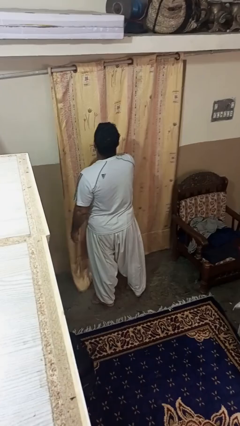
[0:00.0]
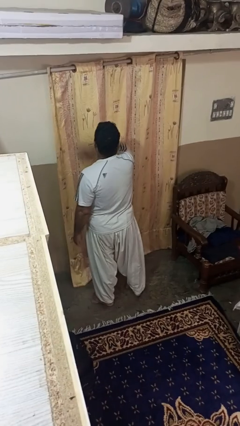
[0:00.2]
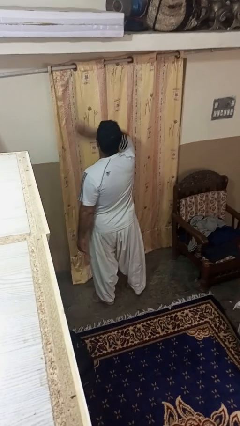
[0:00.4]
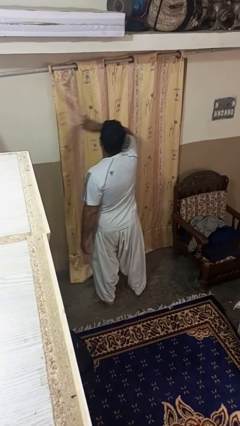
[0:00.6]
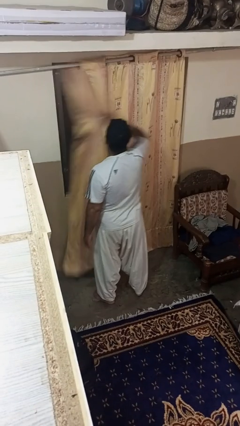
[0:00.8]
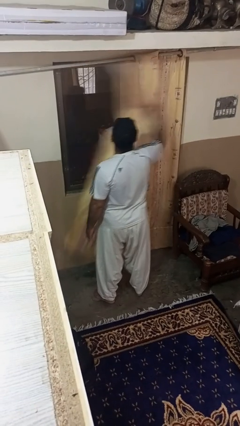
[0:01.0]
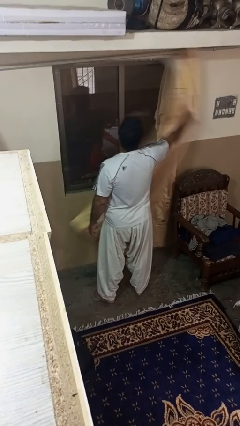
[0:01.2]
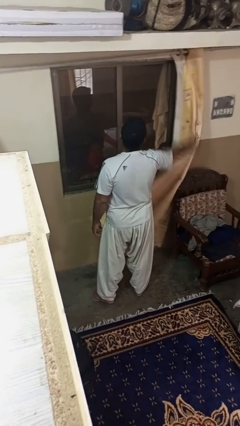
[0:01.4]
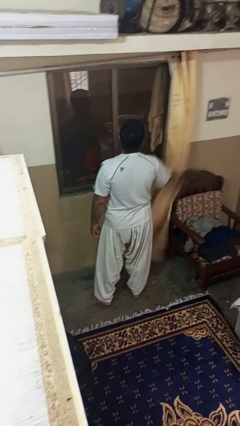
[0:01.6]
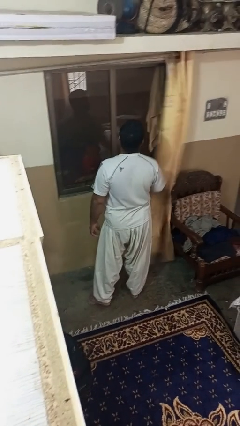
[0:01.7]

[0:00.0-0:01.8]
person opens curtains

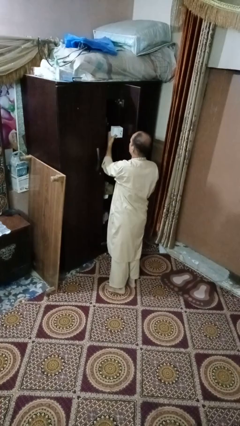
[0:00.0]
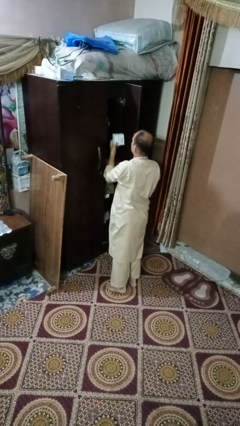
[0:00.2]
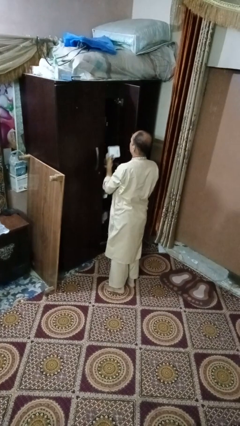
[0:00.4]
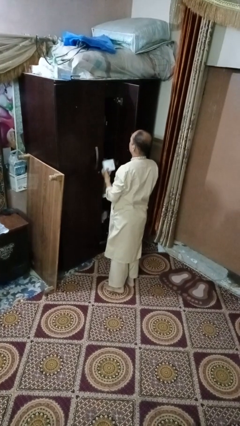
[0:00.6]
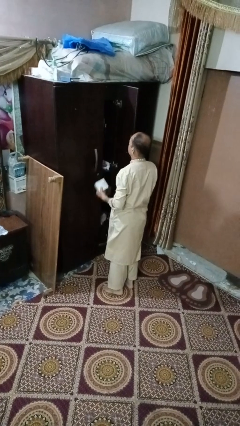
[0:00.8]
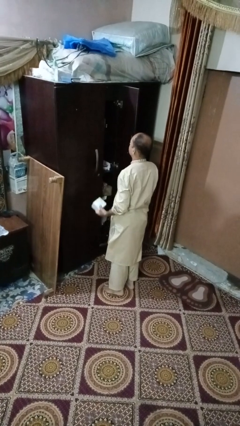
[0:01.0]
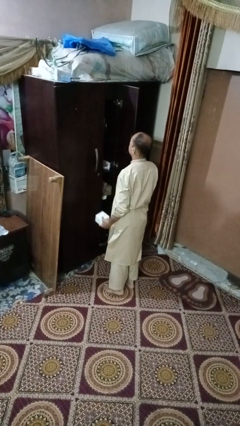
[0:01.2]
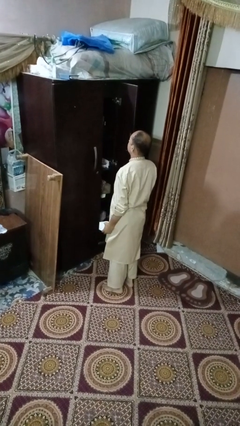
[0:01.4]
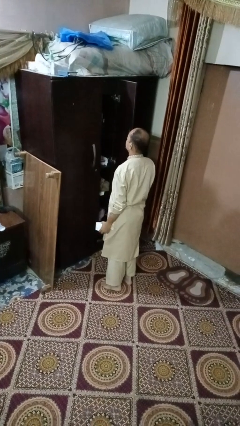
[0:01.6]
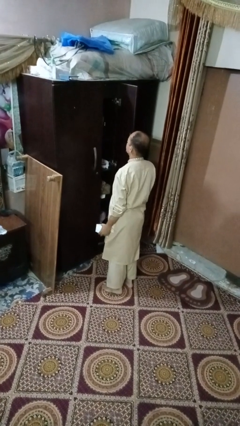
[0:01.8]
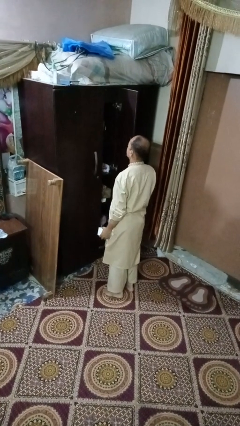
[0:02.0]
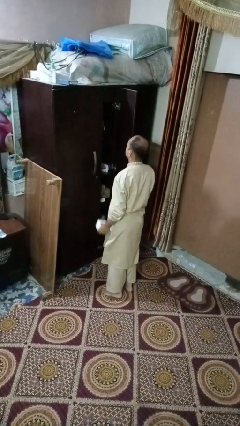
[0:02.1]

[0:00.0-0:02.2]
person puts down object into cabinet

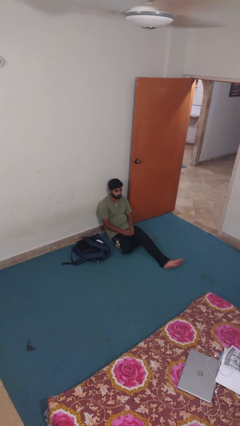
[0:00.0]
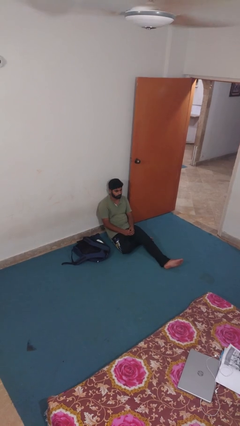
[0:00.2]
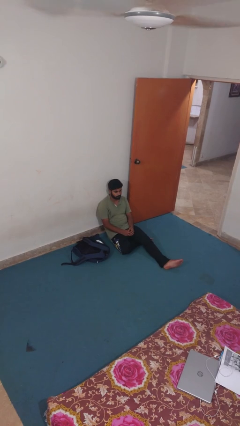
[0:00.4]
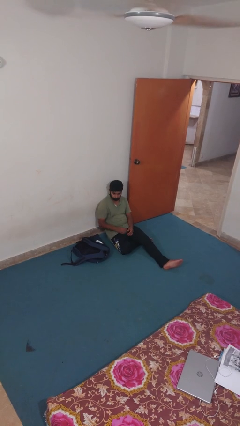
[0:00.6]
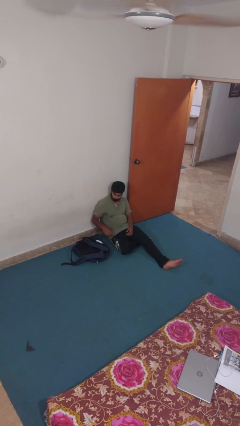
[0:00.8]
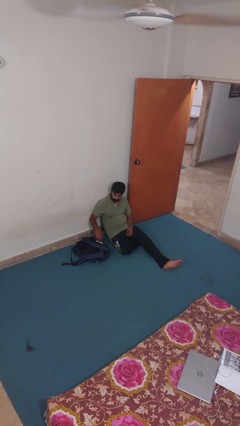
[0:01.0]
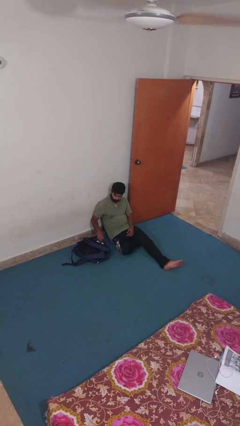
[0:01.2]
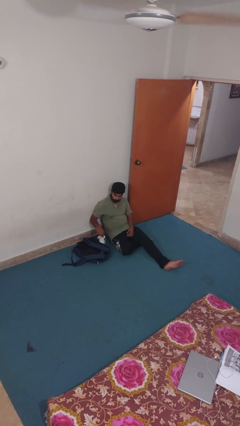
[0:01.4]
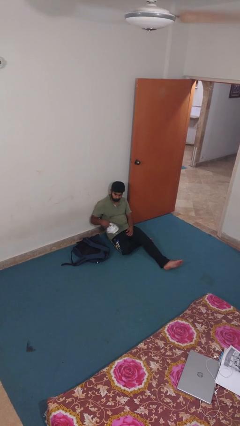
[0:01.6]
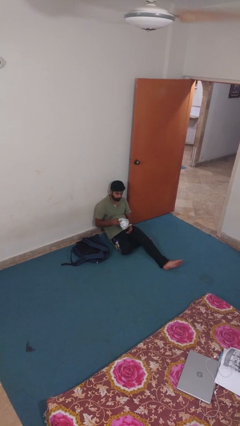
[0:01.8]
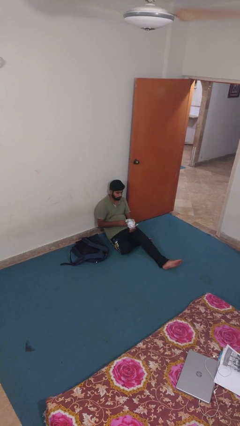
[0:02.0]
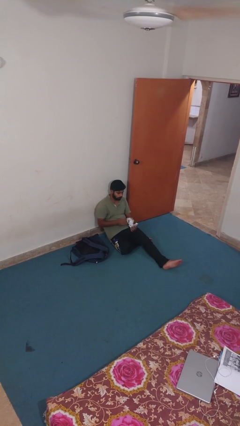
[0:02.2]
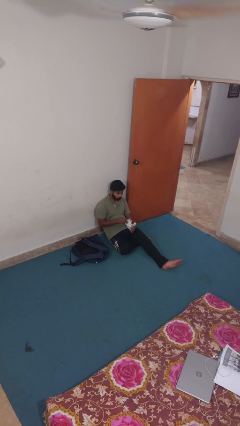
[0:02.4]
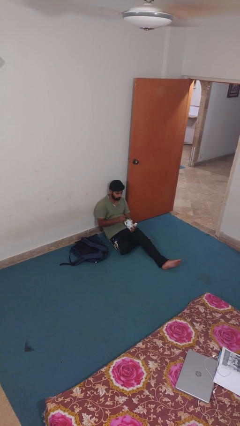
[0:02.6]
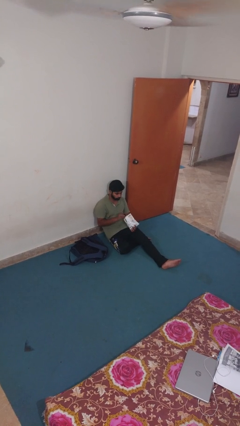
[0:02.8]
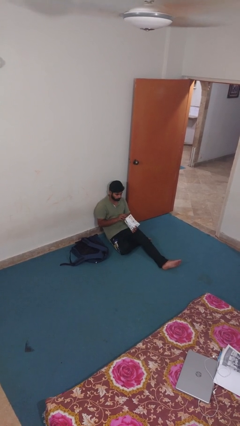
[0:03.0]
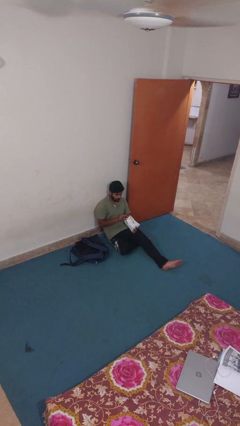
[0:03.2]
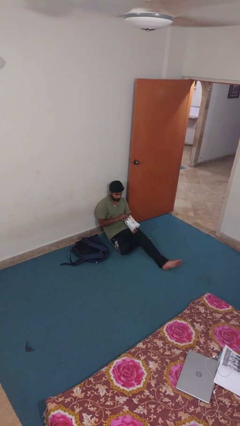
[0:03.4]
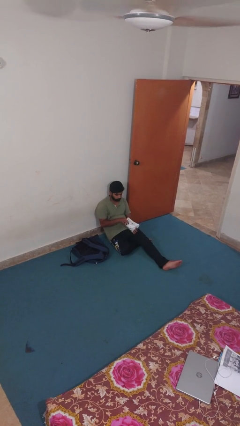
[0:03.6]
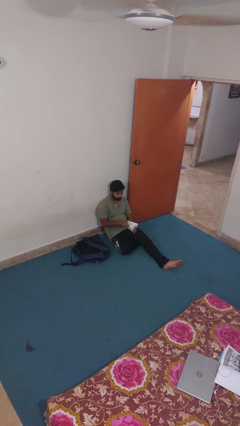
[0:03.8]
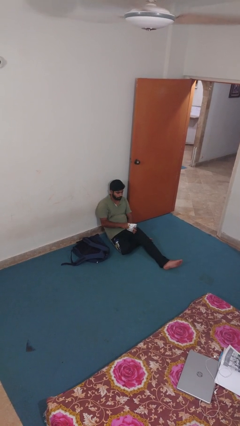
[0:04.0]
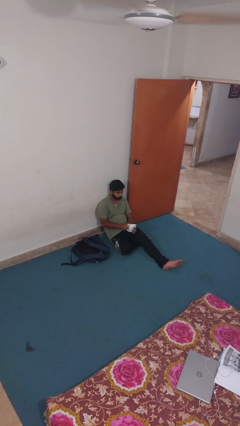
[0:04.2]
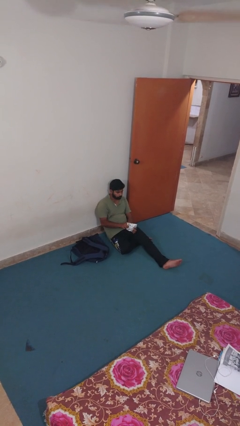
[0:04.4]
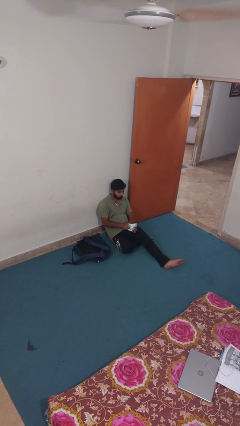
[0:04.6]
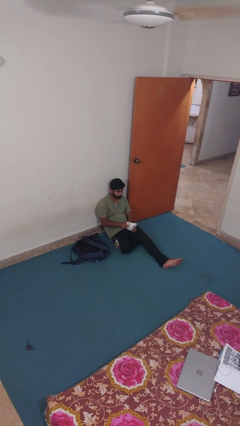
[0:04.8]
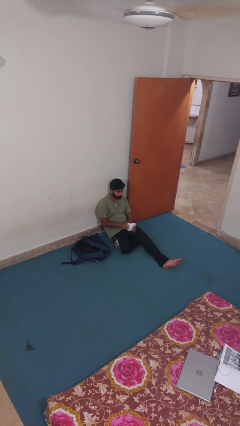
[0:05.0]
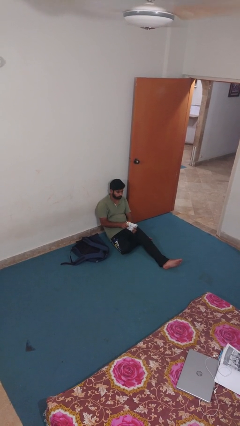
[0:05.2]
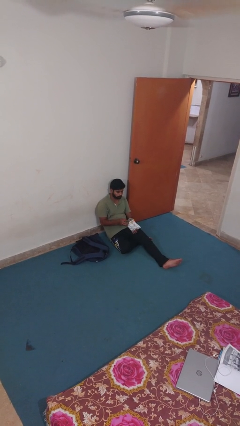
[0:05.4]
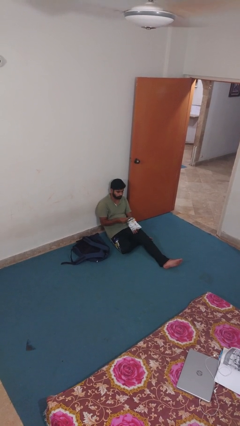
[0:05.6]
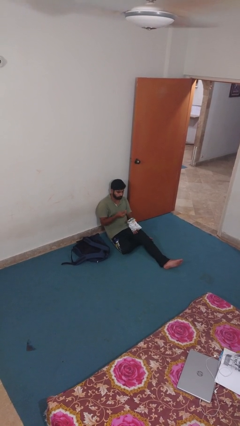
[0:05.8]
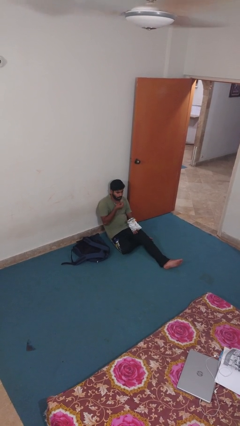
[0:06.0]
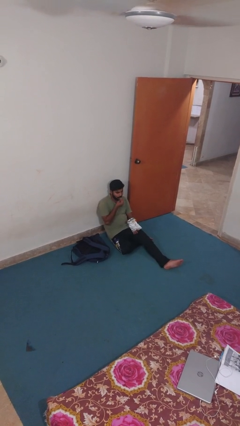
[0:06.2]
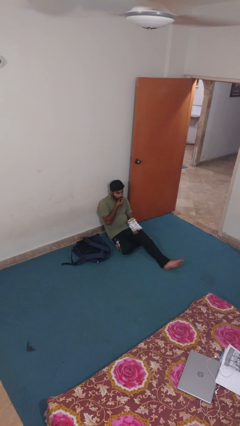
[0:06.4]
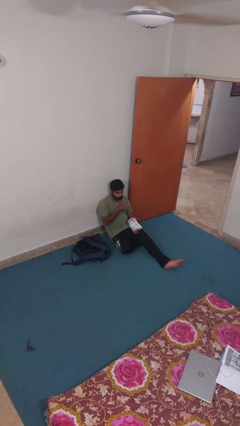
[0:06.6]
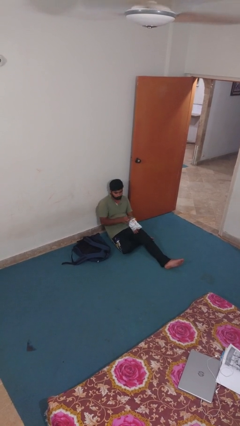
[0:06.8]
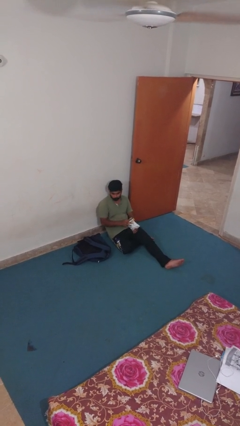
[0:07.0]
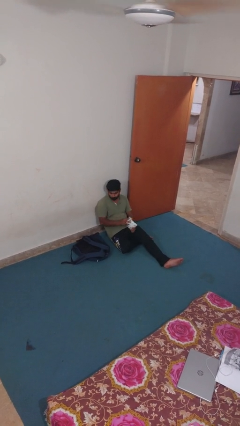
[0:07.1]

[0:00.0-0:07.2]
person eats snack from bag

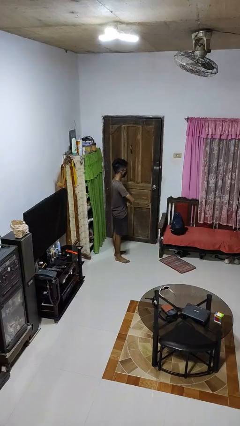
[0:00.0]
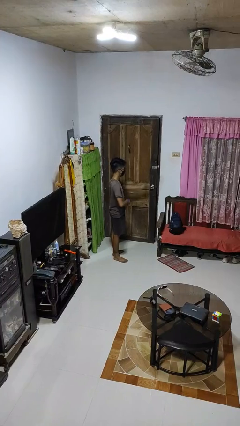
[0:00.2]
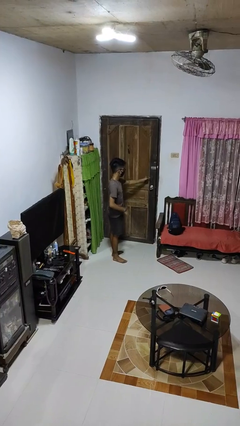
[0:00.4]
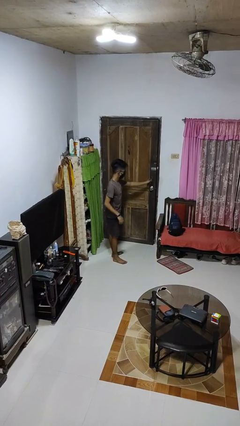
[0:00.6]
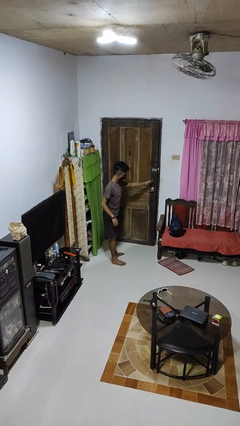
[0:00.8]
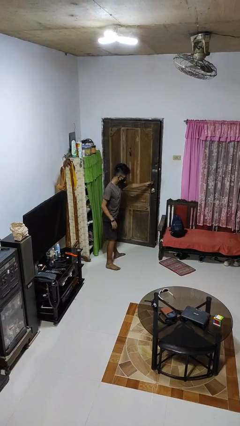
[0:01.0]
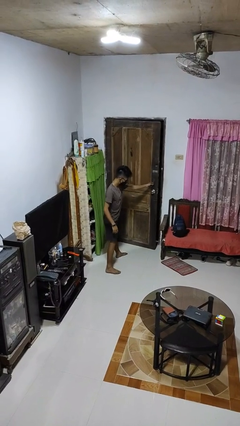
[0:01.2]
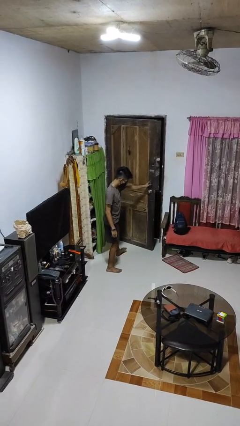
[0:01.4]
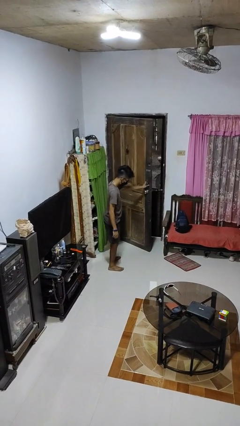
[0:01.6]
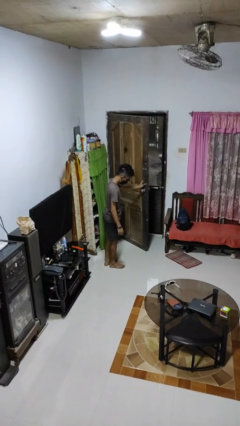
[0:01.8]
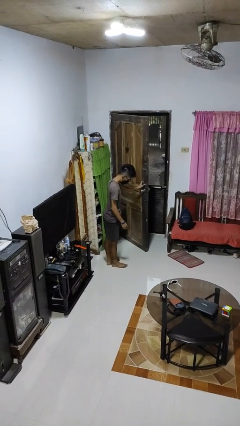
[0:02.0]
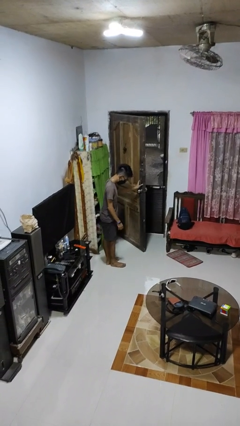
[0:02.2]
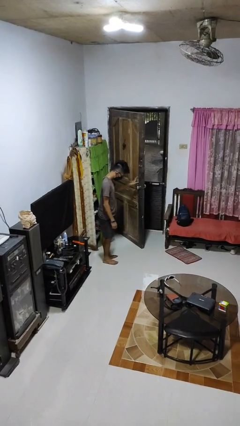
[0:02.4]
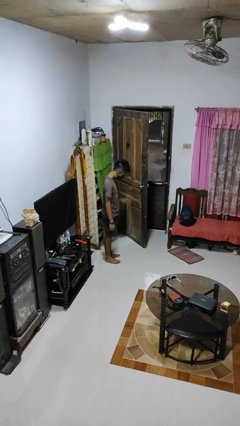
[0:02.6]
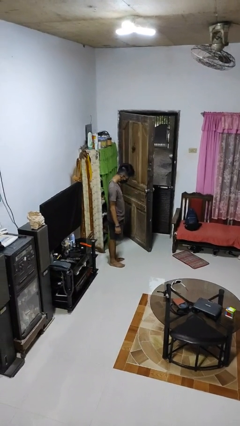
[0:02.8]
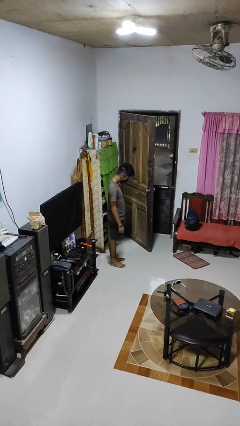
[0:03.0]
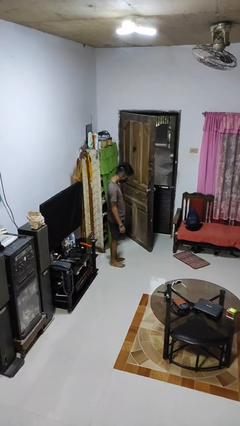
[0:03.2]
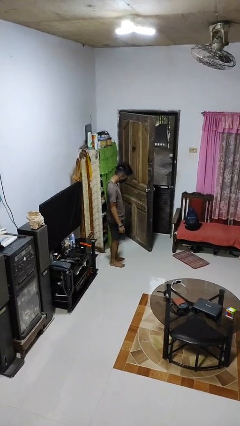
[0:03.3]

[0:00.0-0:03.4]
person opens facility door

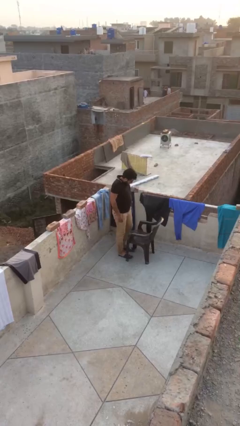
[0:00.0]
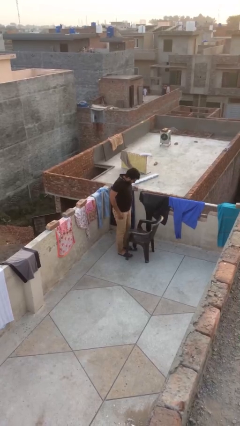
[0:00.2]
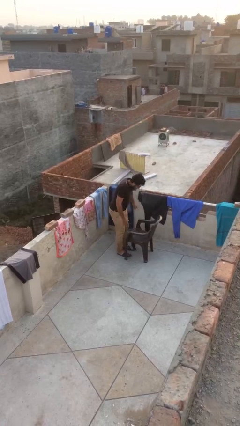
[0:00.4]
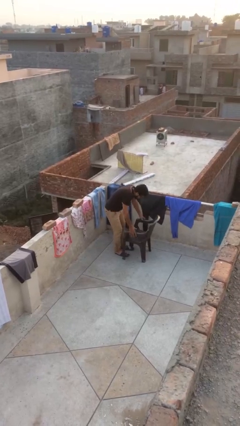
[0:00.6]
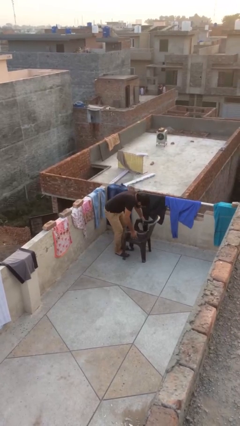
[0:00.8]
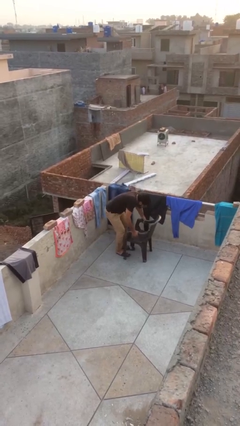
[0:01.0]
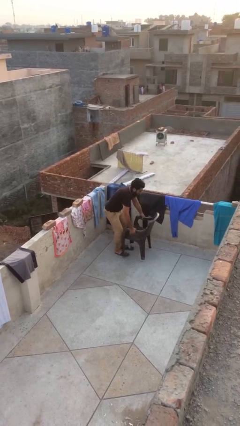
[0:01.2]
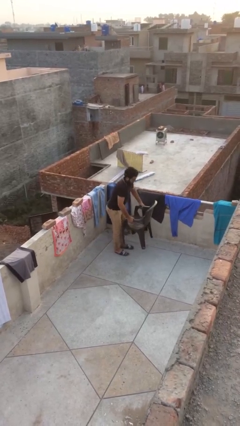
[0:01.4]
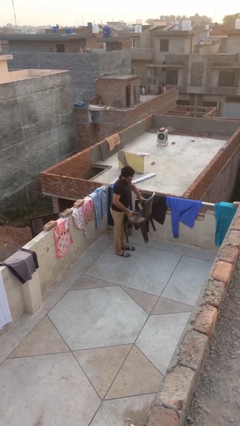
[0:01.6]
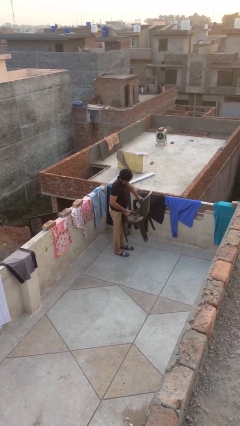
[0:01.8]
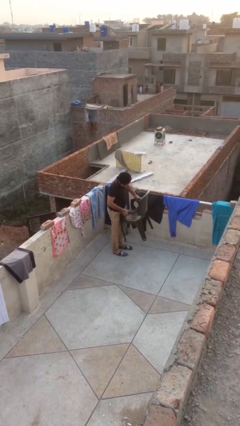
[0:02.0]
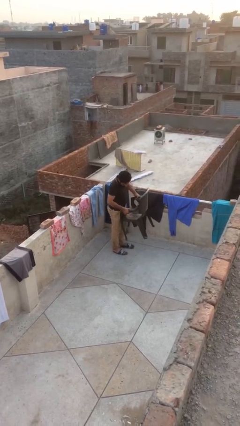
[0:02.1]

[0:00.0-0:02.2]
person picks up object from floor

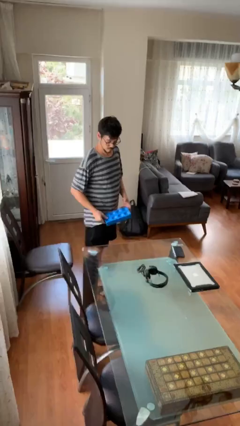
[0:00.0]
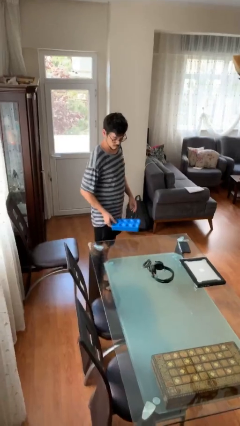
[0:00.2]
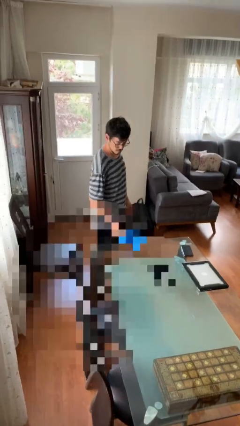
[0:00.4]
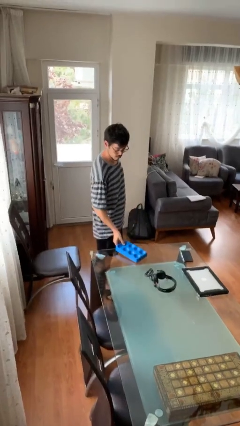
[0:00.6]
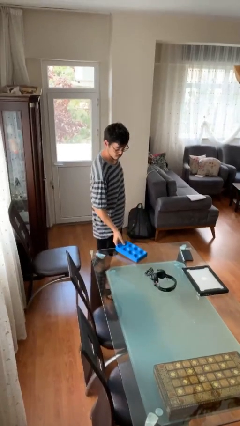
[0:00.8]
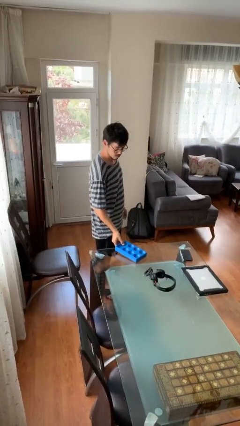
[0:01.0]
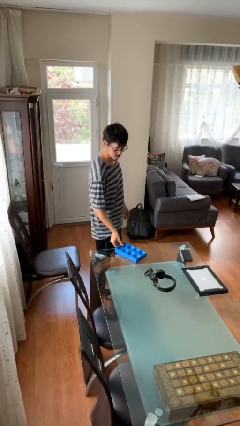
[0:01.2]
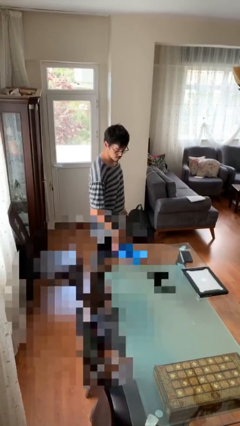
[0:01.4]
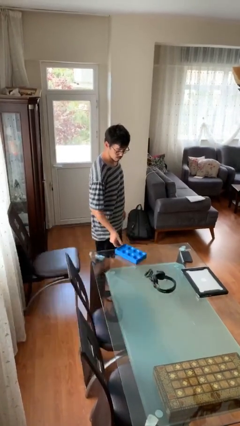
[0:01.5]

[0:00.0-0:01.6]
person puts down object on table
